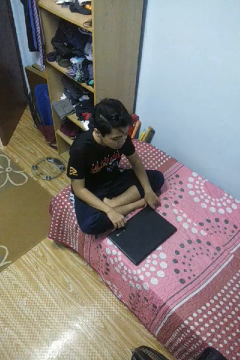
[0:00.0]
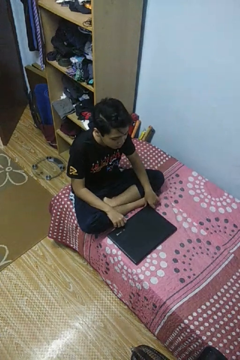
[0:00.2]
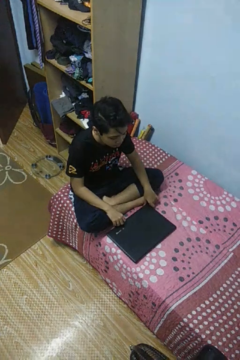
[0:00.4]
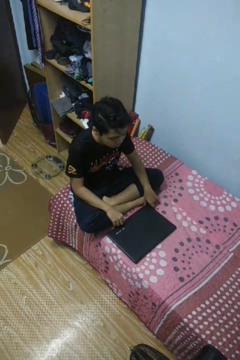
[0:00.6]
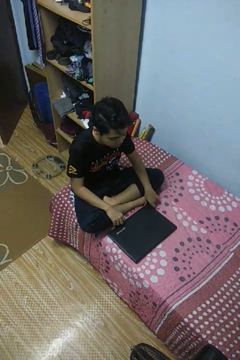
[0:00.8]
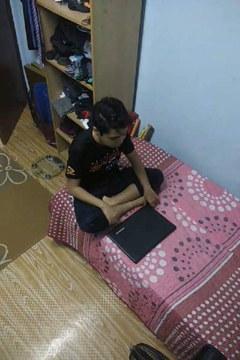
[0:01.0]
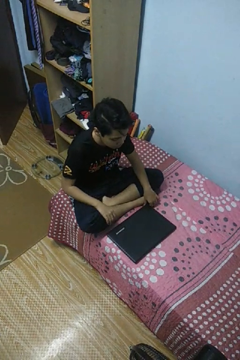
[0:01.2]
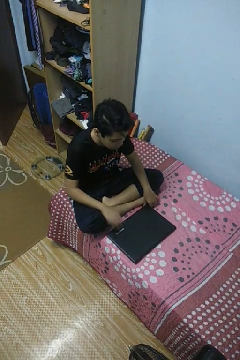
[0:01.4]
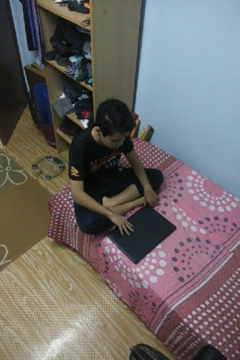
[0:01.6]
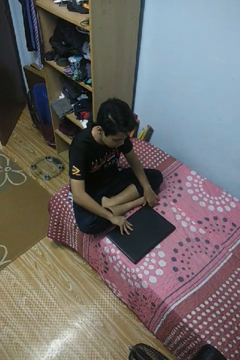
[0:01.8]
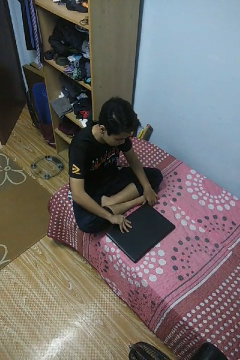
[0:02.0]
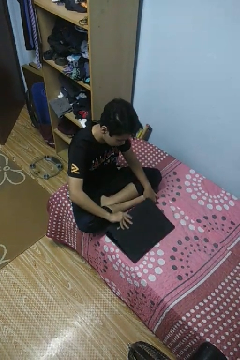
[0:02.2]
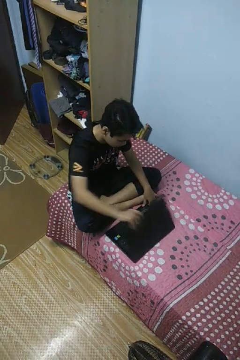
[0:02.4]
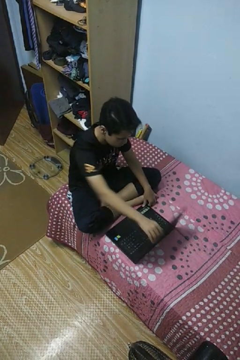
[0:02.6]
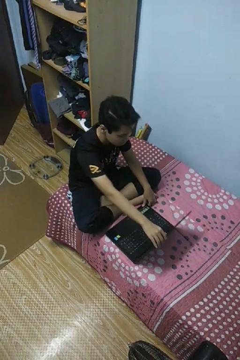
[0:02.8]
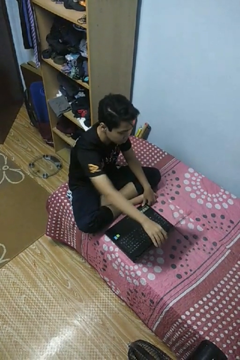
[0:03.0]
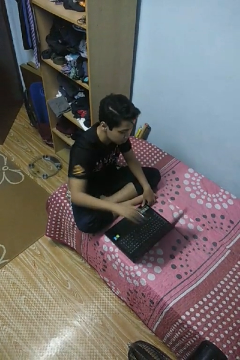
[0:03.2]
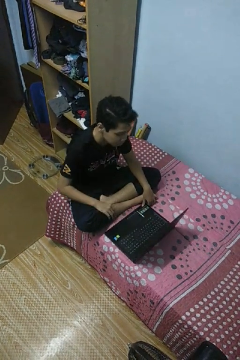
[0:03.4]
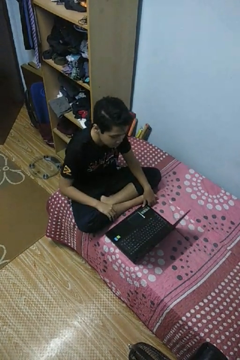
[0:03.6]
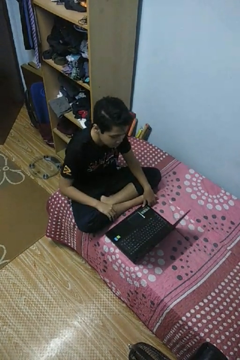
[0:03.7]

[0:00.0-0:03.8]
person opens laptop

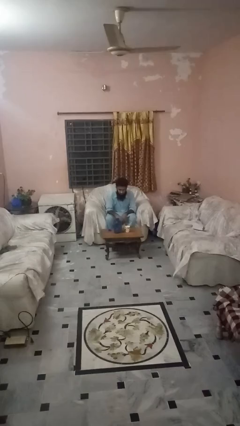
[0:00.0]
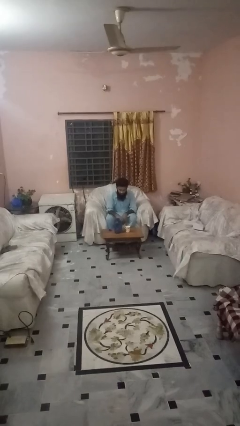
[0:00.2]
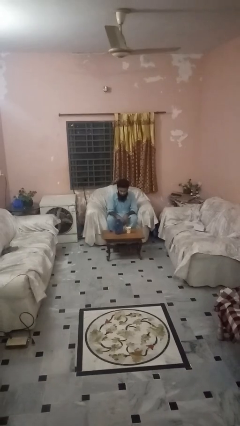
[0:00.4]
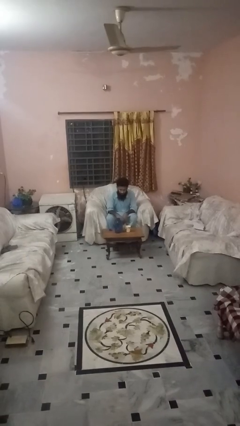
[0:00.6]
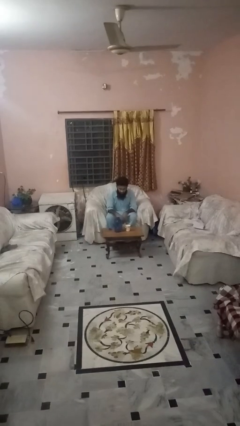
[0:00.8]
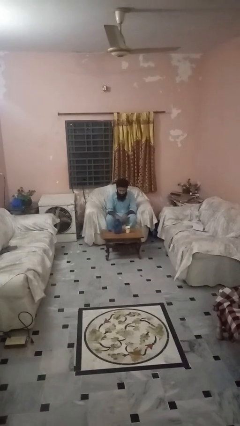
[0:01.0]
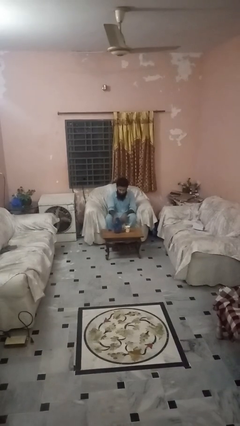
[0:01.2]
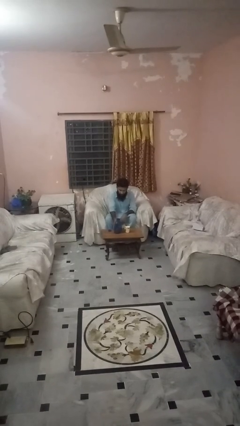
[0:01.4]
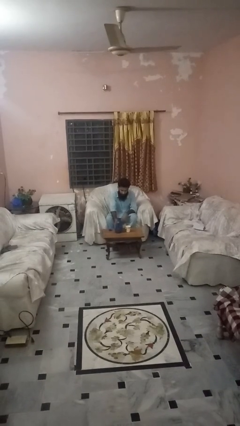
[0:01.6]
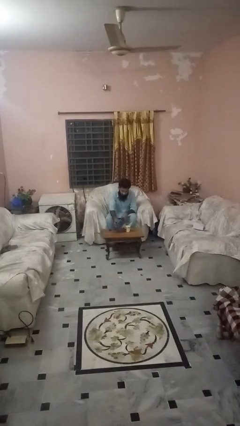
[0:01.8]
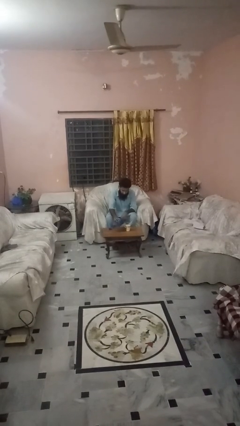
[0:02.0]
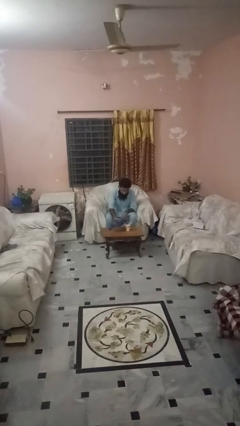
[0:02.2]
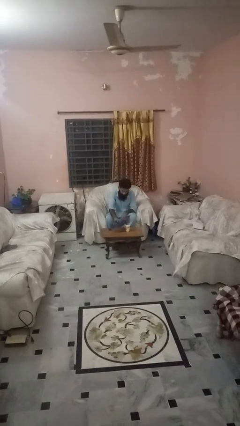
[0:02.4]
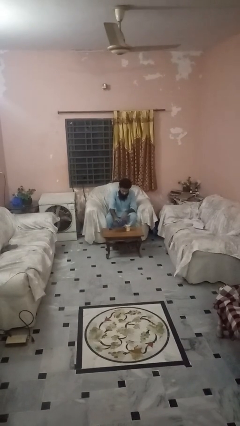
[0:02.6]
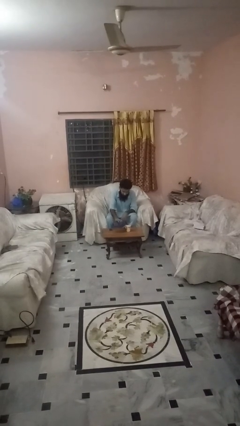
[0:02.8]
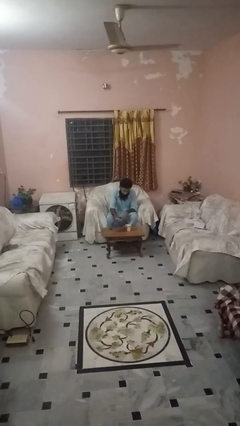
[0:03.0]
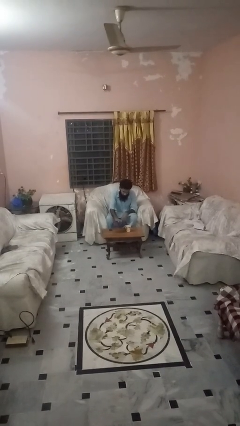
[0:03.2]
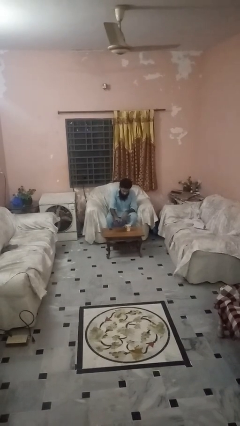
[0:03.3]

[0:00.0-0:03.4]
person pours liquid into cup

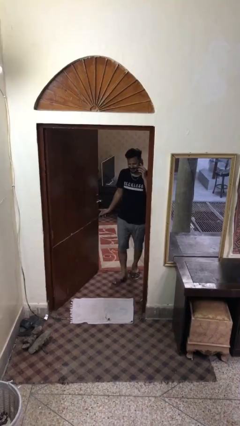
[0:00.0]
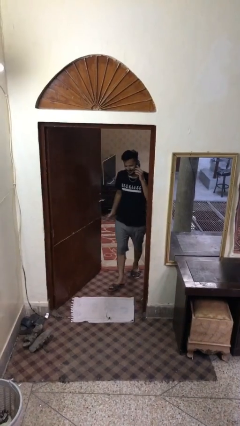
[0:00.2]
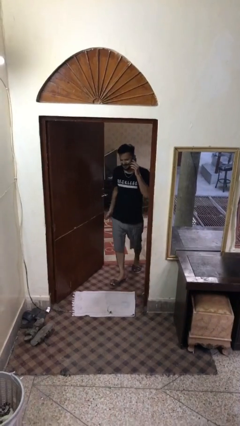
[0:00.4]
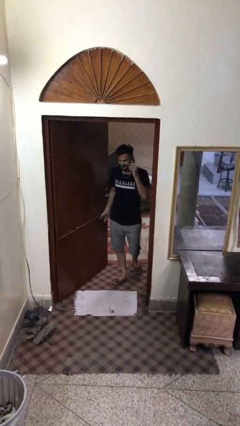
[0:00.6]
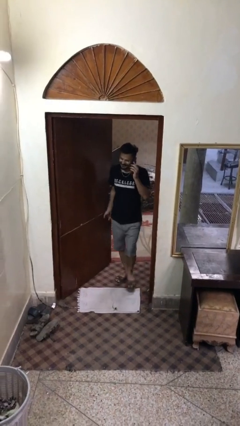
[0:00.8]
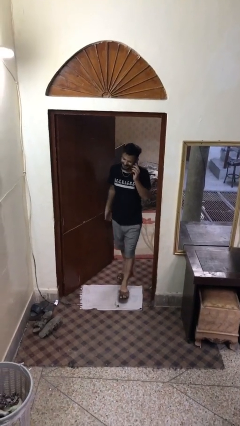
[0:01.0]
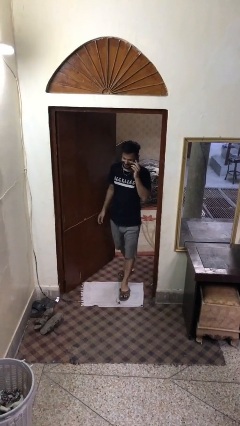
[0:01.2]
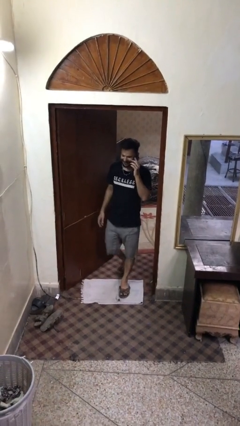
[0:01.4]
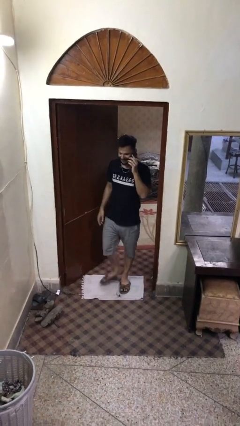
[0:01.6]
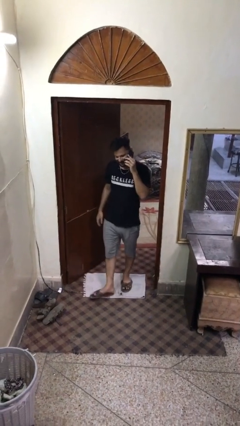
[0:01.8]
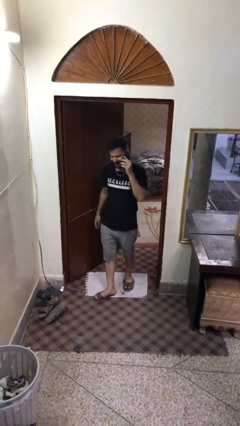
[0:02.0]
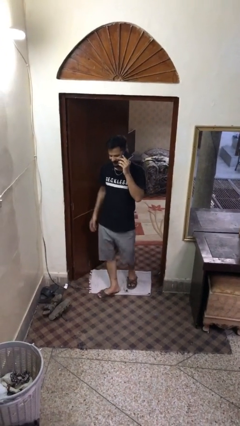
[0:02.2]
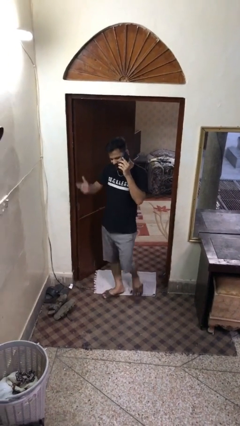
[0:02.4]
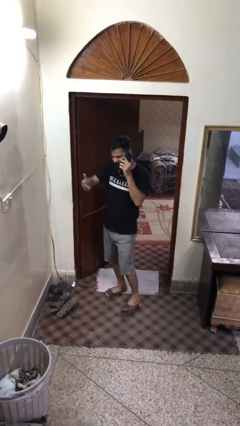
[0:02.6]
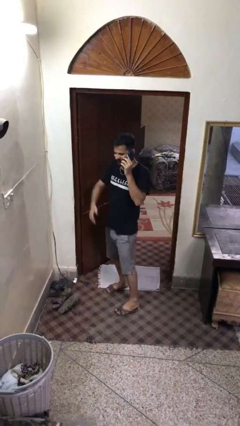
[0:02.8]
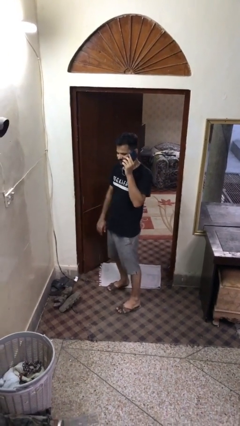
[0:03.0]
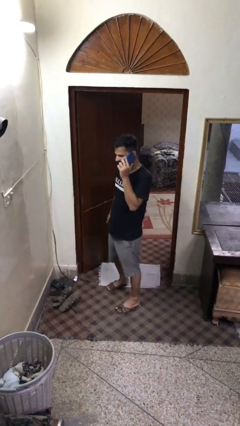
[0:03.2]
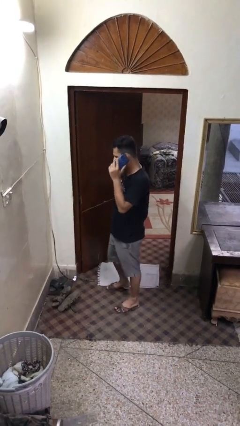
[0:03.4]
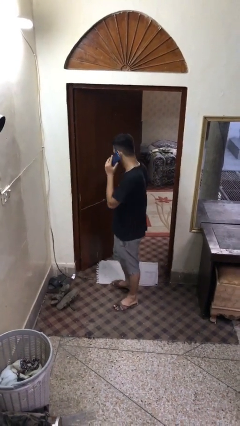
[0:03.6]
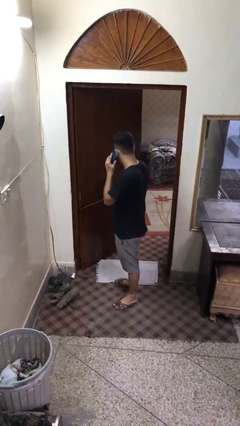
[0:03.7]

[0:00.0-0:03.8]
person enters scene through structure

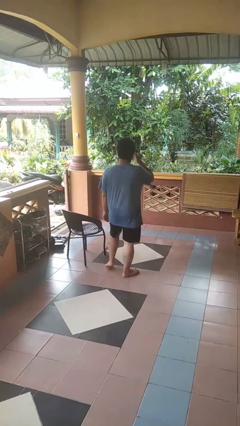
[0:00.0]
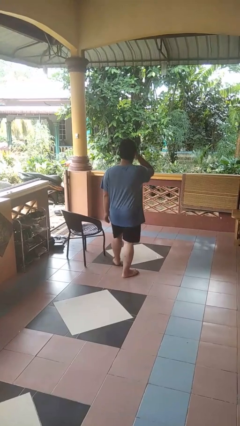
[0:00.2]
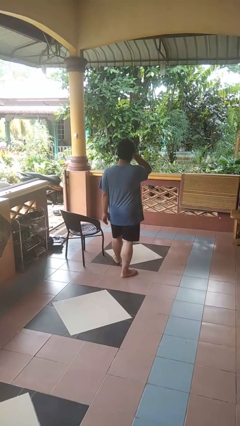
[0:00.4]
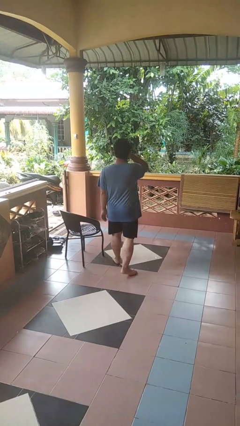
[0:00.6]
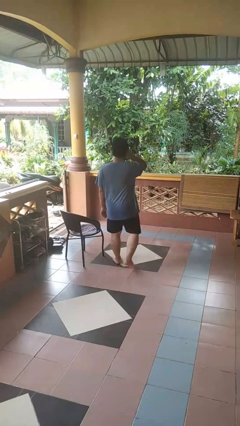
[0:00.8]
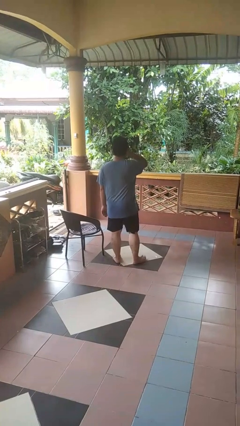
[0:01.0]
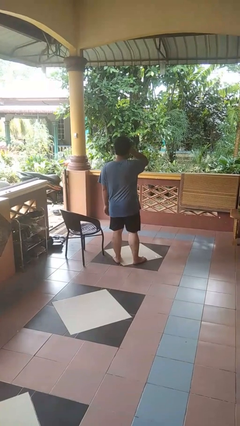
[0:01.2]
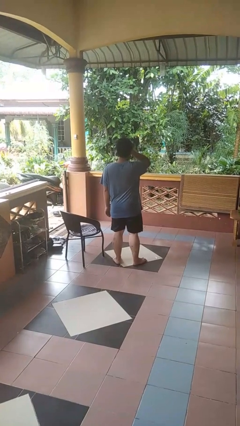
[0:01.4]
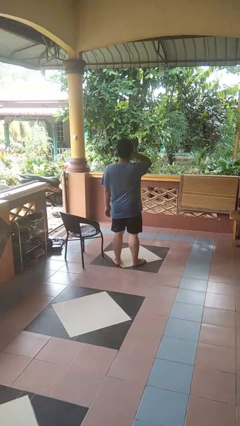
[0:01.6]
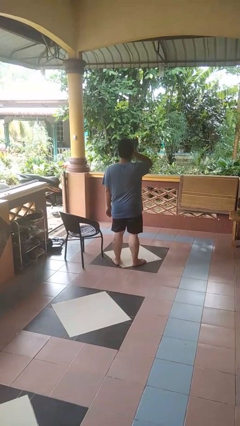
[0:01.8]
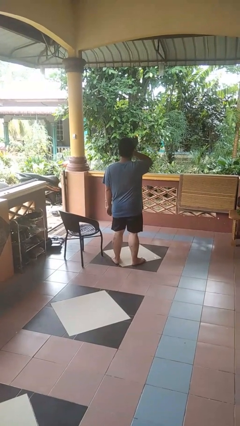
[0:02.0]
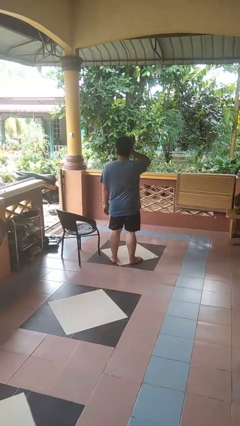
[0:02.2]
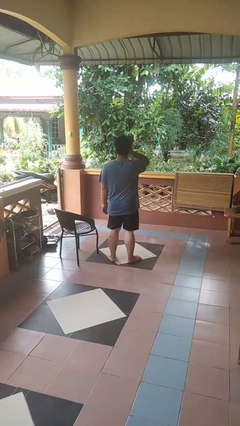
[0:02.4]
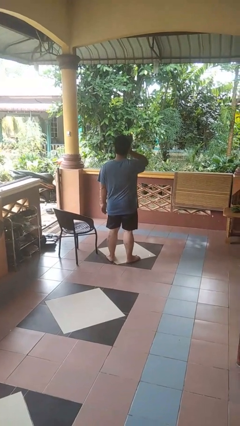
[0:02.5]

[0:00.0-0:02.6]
person rubs eyes

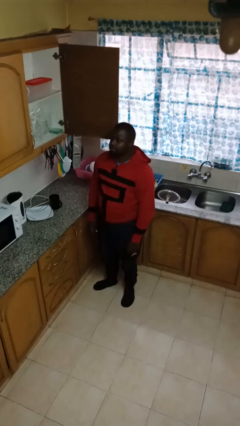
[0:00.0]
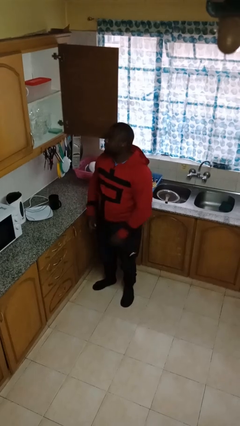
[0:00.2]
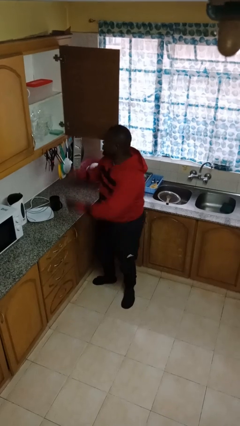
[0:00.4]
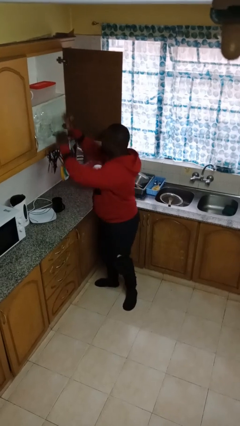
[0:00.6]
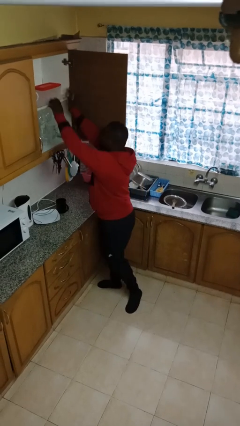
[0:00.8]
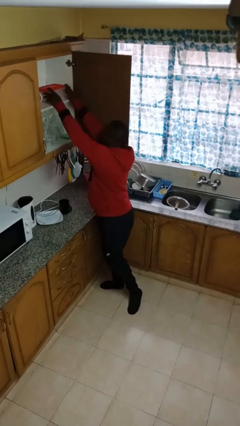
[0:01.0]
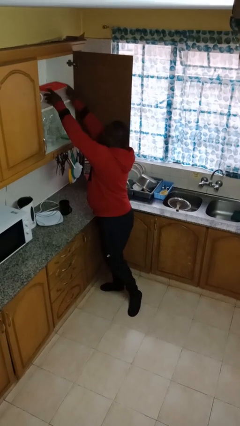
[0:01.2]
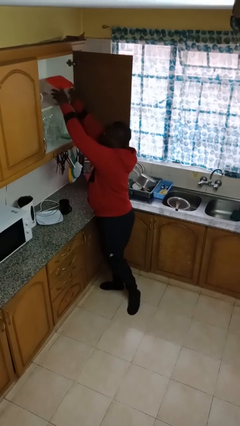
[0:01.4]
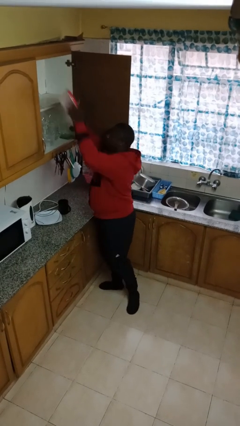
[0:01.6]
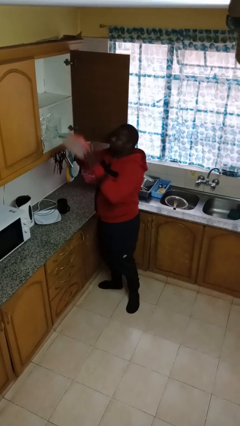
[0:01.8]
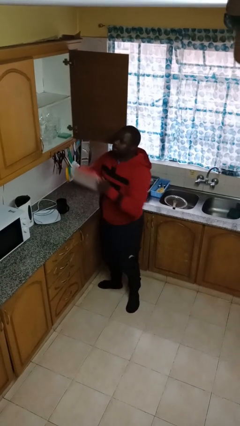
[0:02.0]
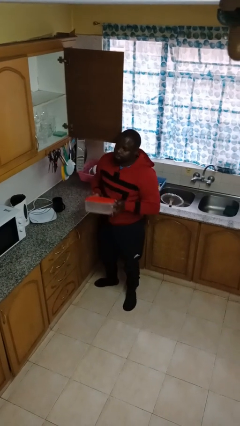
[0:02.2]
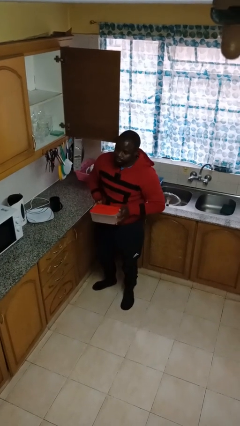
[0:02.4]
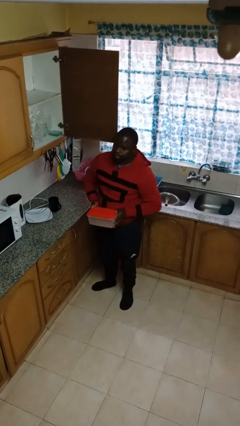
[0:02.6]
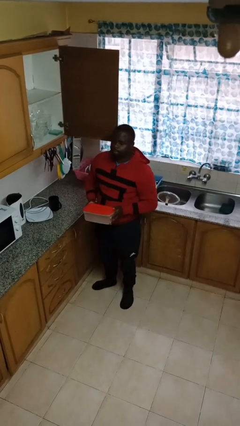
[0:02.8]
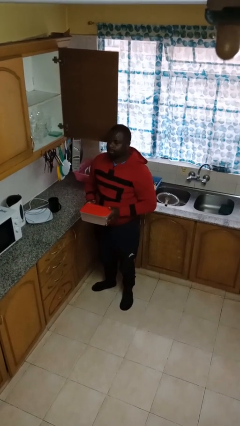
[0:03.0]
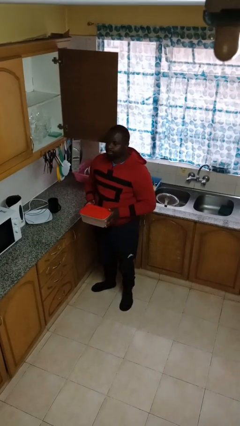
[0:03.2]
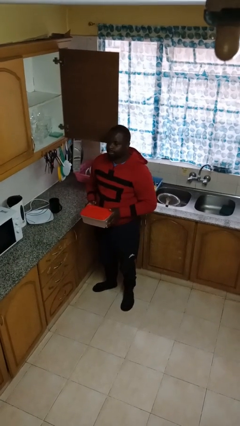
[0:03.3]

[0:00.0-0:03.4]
person picks up object from cabinet

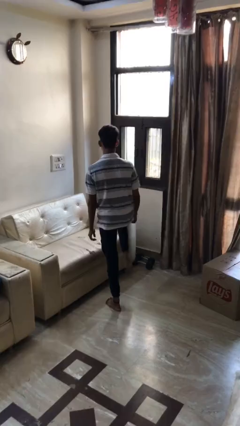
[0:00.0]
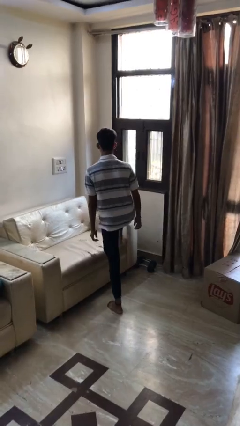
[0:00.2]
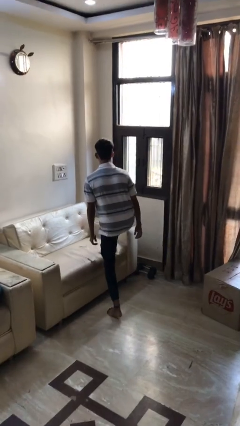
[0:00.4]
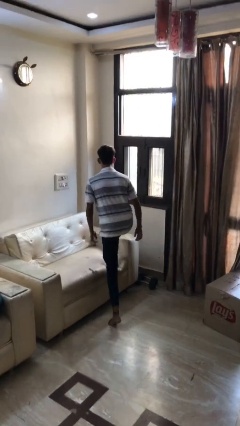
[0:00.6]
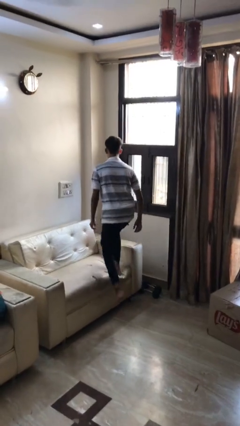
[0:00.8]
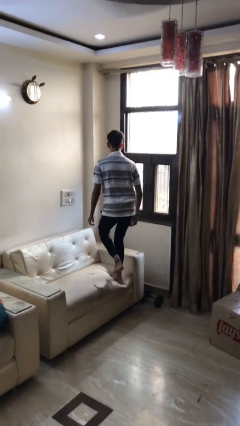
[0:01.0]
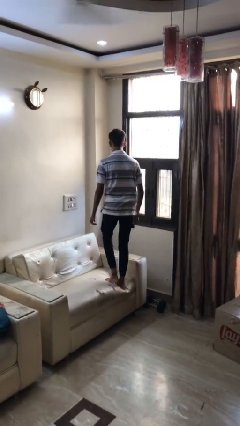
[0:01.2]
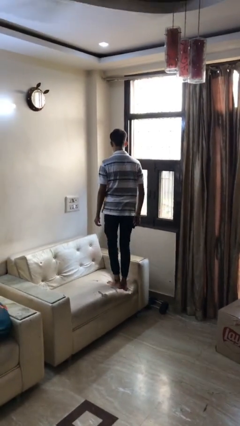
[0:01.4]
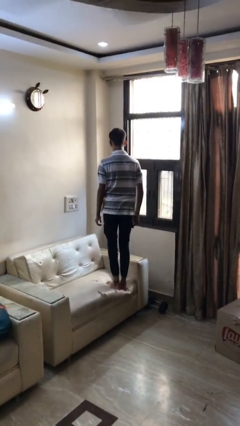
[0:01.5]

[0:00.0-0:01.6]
person climbs on couch
